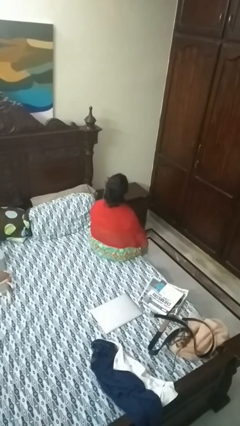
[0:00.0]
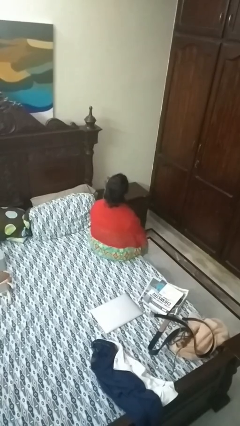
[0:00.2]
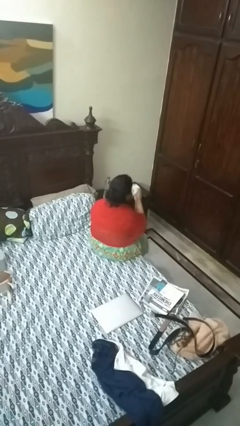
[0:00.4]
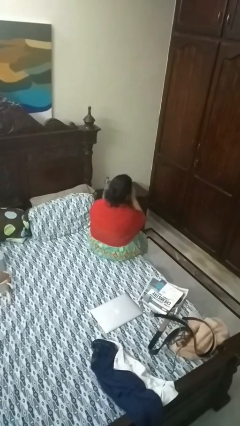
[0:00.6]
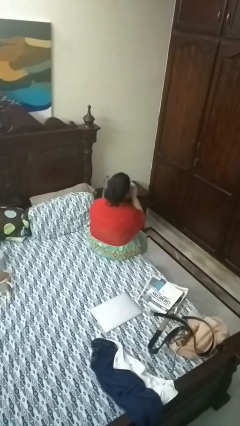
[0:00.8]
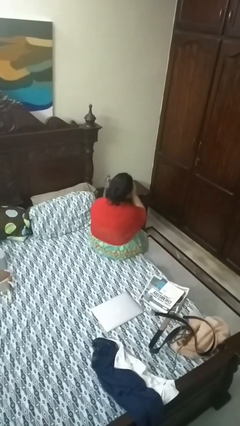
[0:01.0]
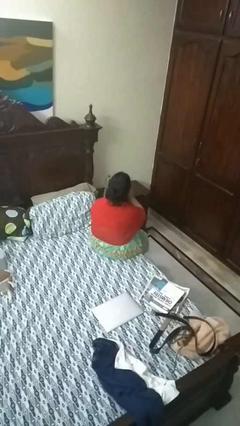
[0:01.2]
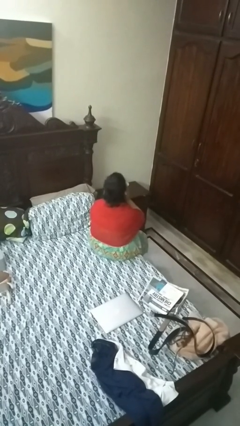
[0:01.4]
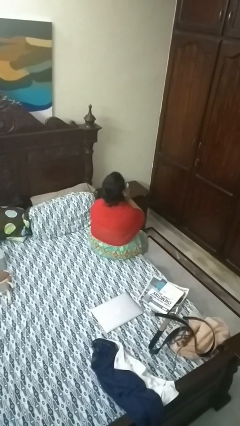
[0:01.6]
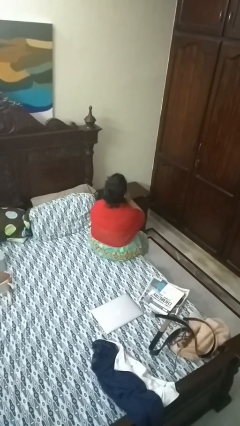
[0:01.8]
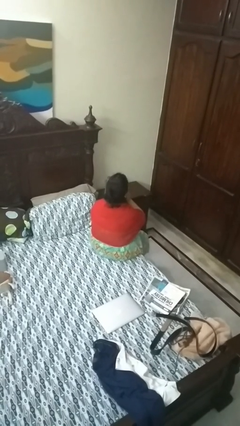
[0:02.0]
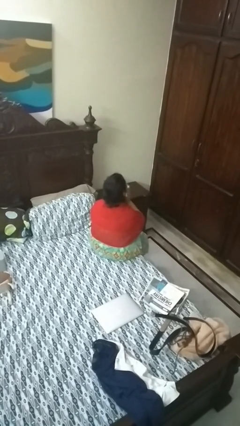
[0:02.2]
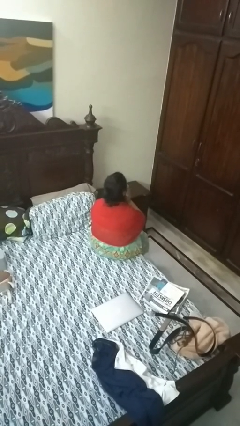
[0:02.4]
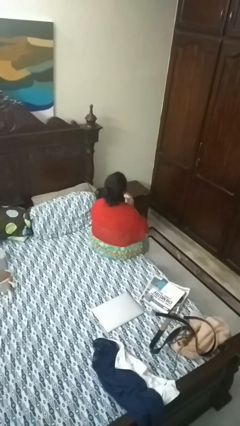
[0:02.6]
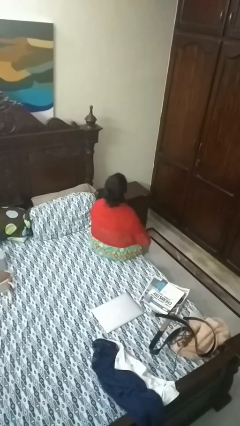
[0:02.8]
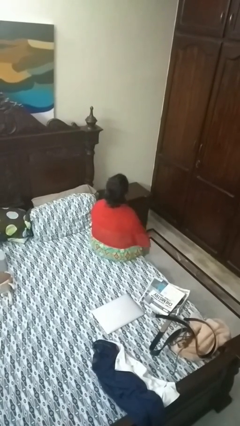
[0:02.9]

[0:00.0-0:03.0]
person wipes mouth with napkin

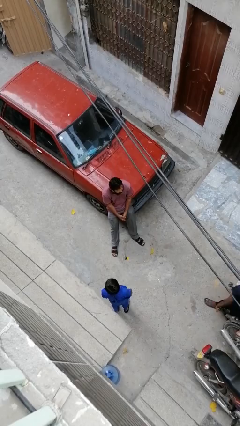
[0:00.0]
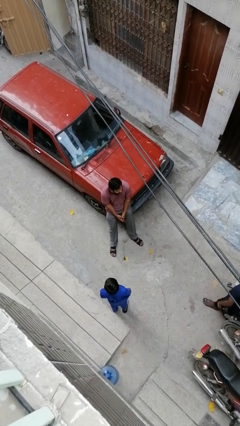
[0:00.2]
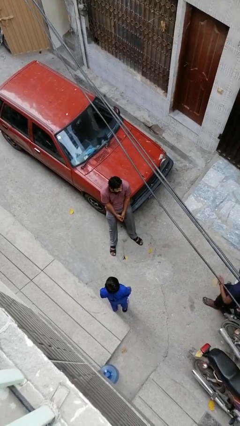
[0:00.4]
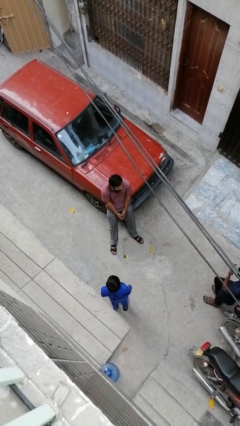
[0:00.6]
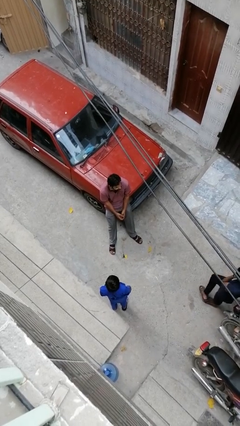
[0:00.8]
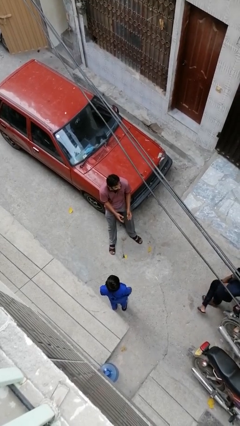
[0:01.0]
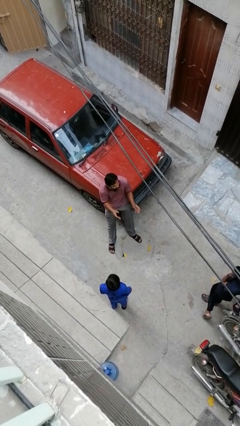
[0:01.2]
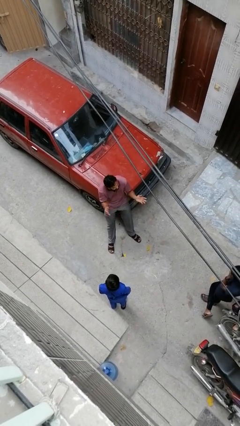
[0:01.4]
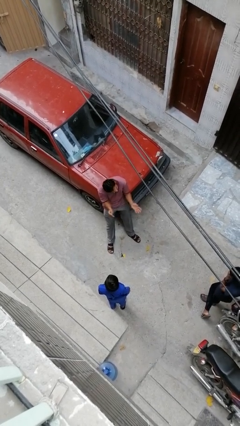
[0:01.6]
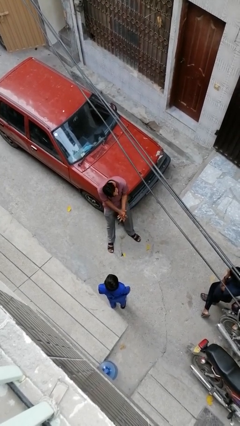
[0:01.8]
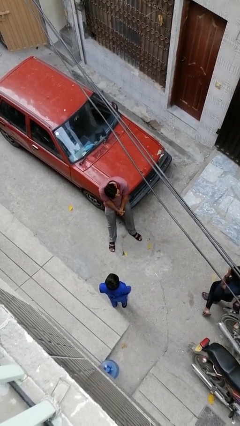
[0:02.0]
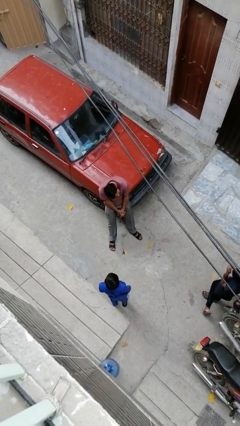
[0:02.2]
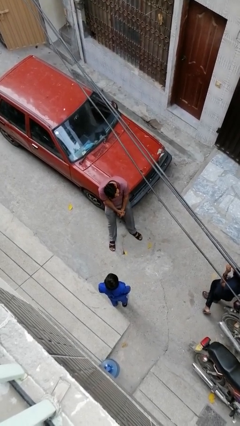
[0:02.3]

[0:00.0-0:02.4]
person laughs with person

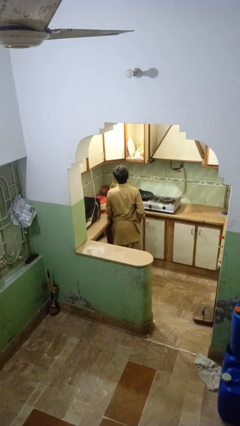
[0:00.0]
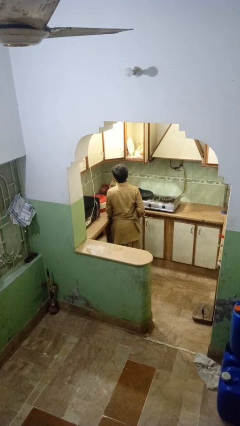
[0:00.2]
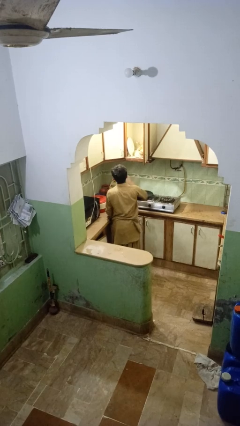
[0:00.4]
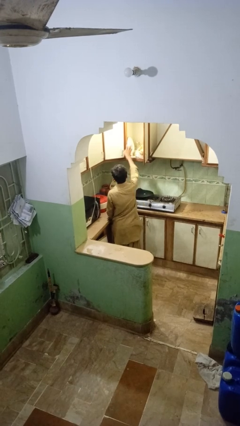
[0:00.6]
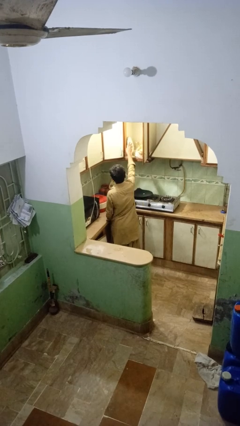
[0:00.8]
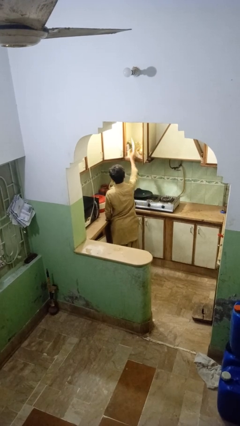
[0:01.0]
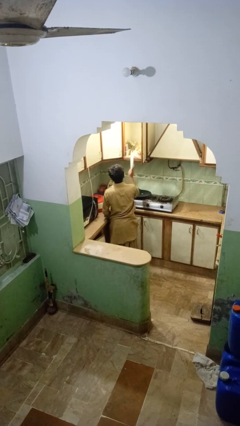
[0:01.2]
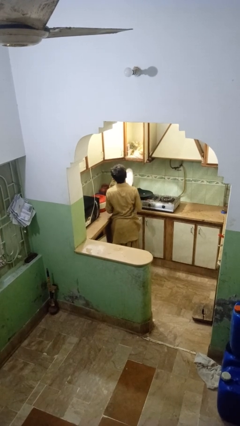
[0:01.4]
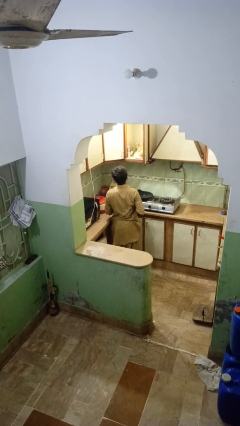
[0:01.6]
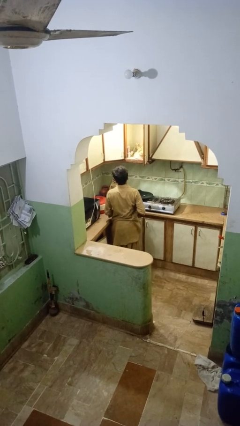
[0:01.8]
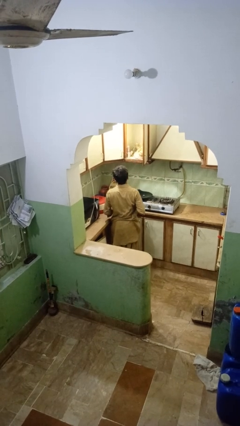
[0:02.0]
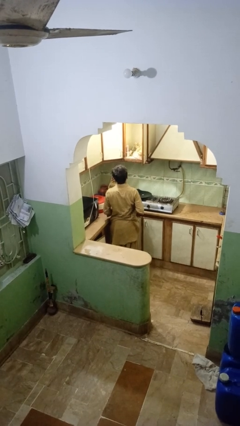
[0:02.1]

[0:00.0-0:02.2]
person takes object from cabinet

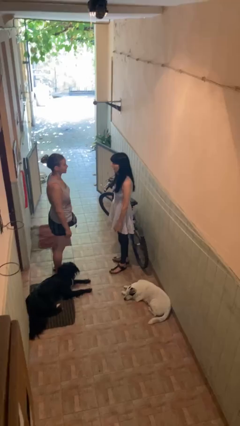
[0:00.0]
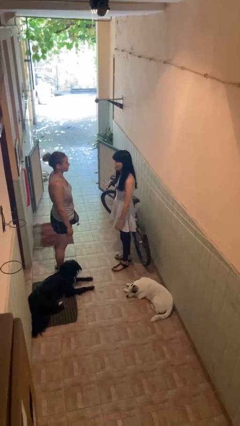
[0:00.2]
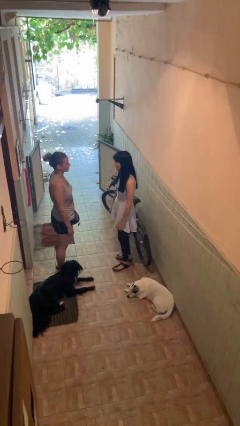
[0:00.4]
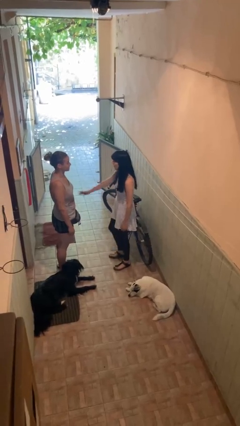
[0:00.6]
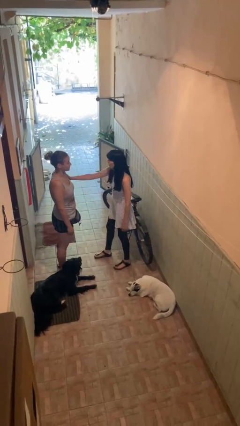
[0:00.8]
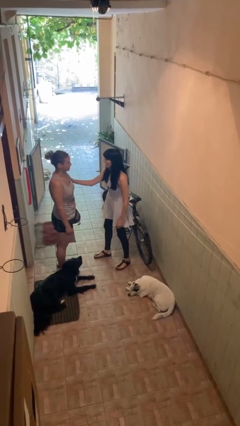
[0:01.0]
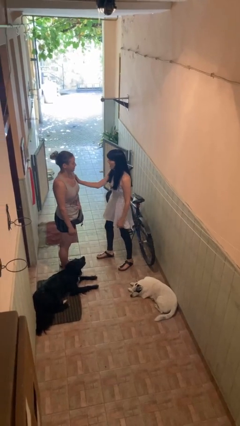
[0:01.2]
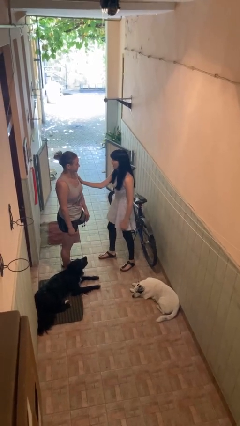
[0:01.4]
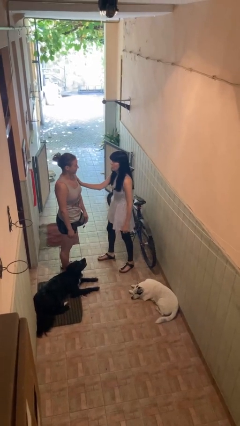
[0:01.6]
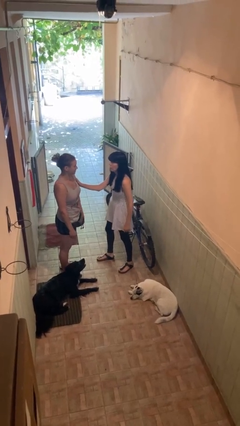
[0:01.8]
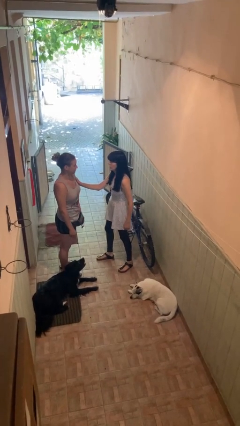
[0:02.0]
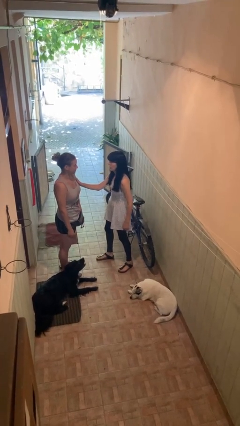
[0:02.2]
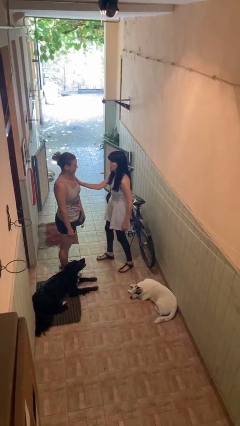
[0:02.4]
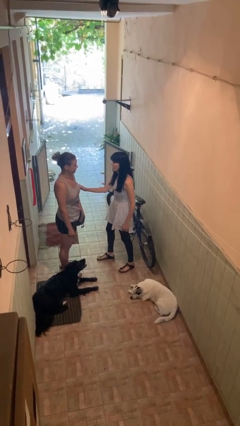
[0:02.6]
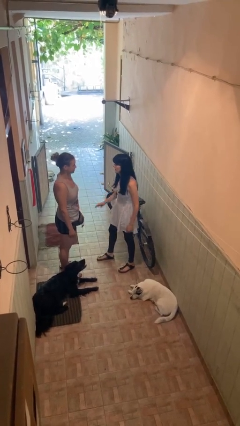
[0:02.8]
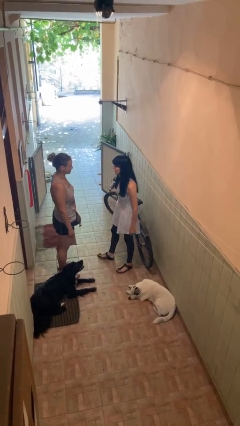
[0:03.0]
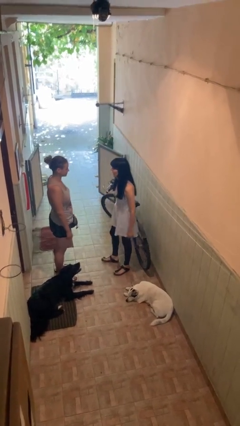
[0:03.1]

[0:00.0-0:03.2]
person grabs person by bicep

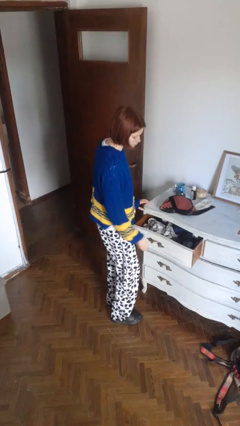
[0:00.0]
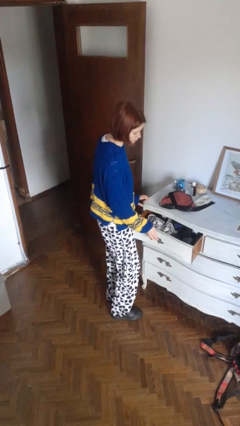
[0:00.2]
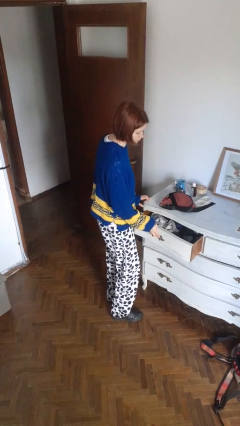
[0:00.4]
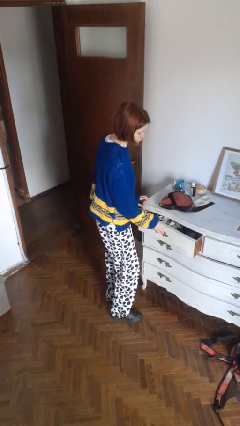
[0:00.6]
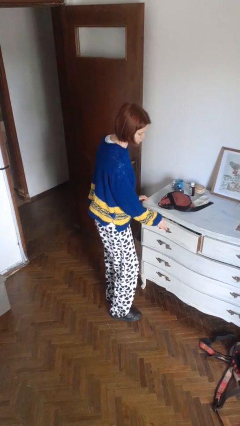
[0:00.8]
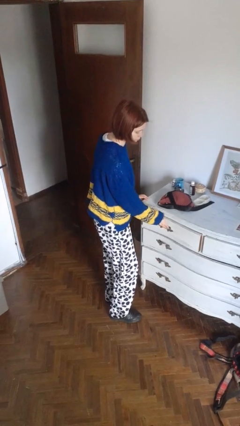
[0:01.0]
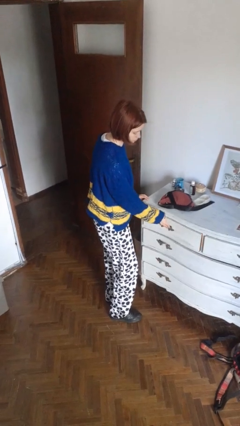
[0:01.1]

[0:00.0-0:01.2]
person closes dresser drawer

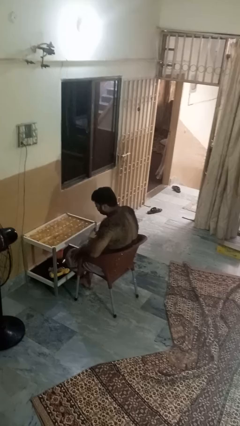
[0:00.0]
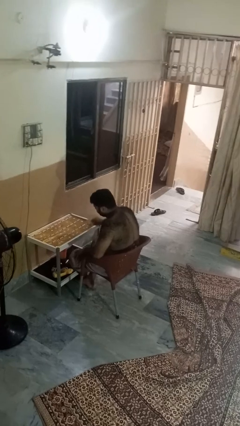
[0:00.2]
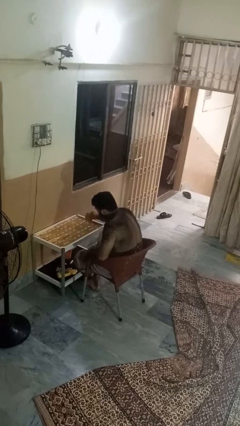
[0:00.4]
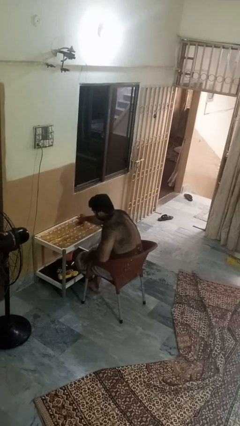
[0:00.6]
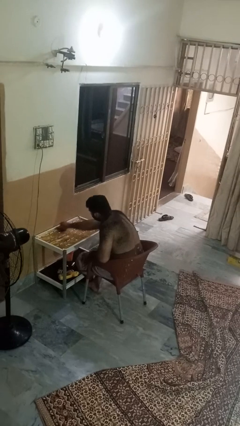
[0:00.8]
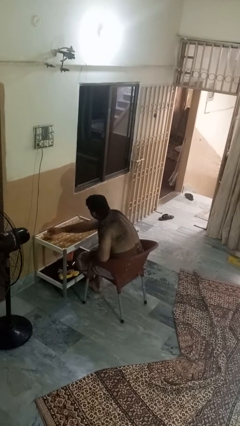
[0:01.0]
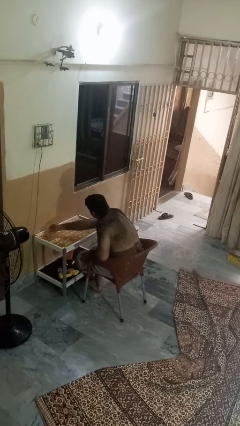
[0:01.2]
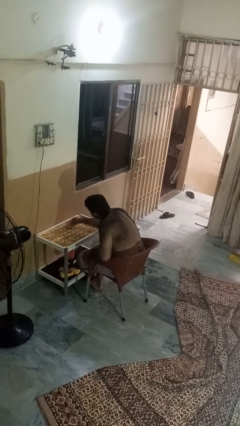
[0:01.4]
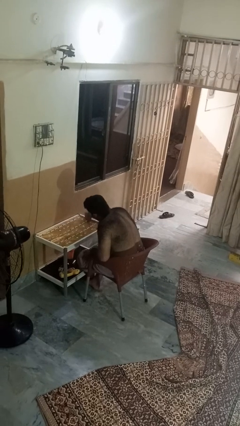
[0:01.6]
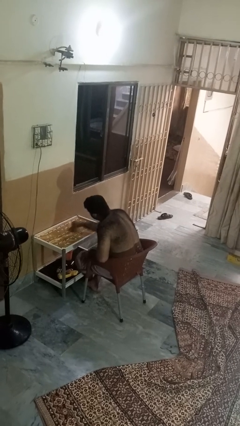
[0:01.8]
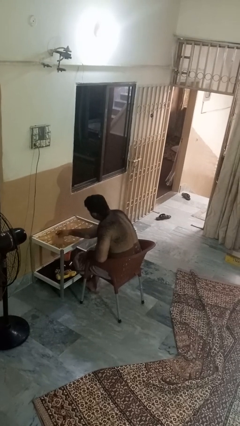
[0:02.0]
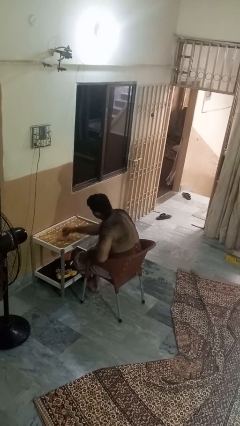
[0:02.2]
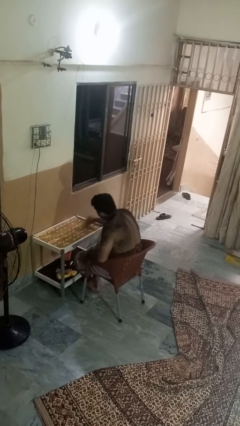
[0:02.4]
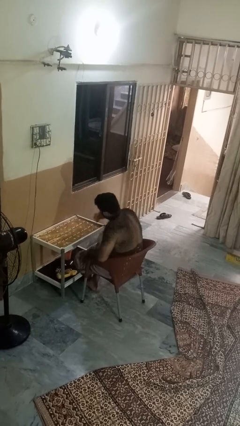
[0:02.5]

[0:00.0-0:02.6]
person cleans table with rag

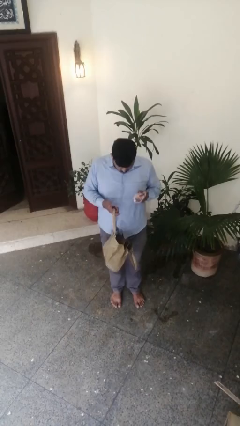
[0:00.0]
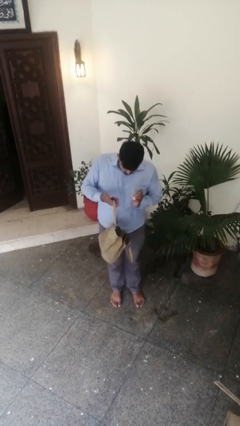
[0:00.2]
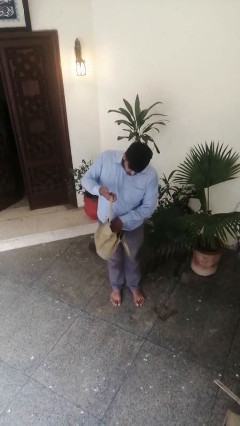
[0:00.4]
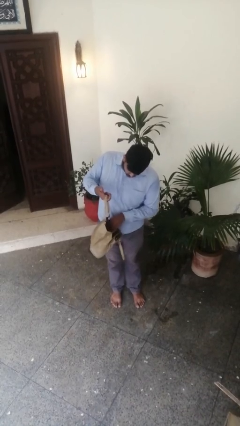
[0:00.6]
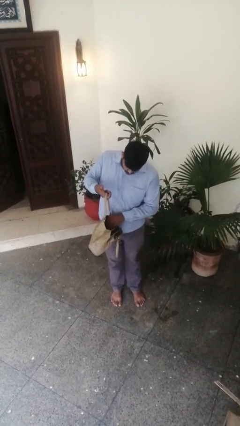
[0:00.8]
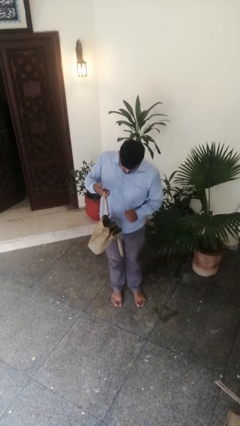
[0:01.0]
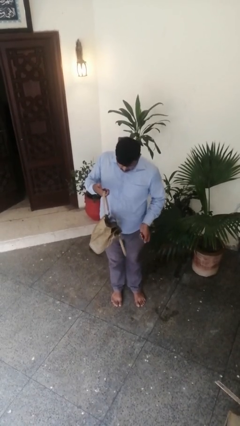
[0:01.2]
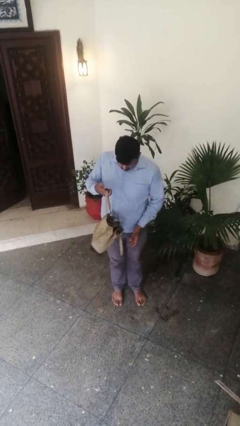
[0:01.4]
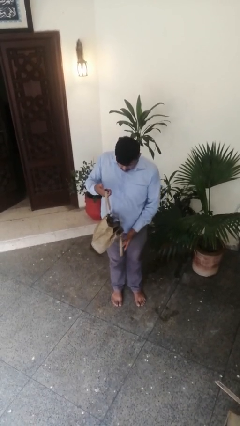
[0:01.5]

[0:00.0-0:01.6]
person puts object into purse

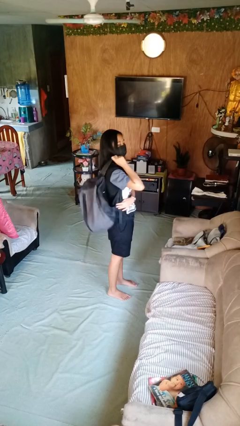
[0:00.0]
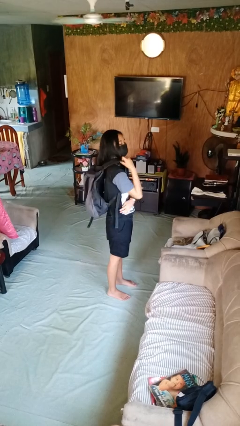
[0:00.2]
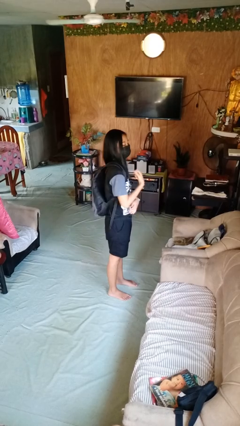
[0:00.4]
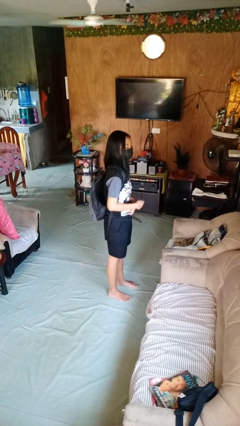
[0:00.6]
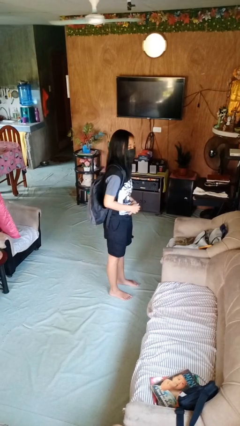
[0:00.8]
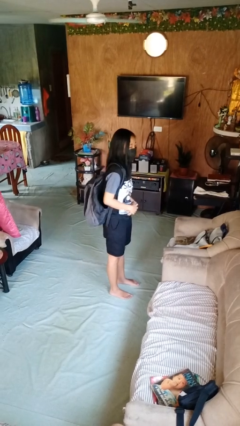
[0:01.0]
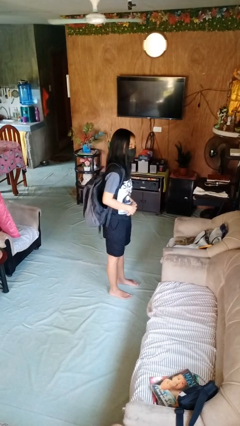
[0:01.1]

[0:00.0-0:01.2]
person puts on backpack
